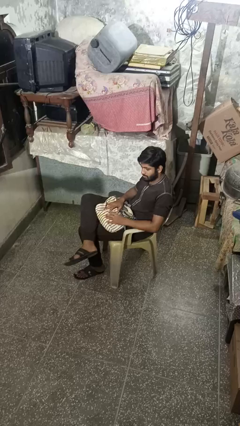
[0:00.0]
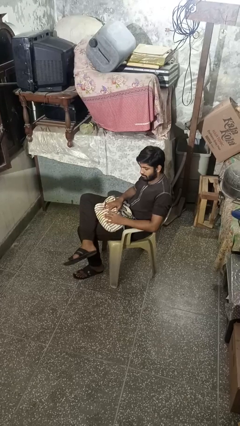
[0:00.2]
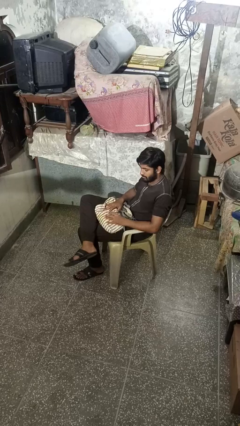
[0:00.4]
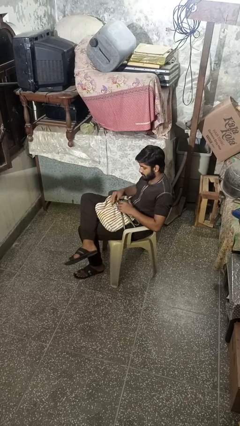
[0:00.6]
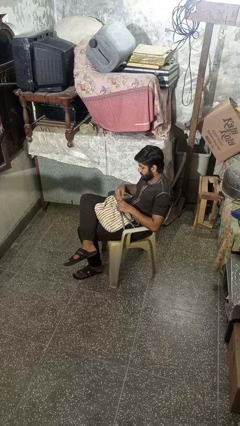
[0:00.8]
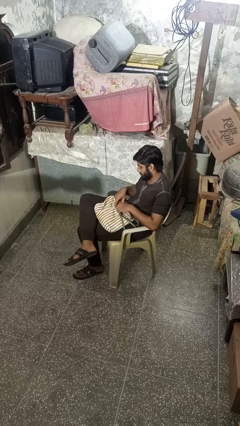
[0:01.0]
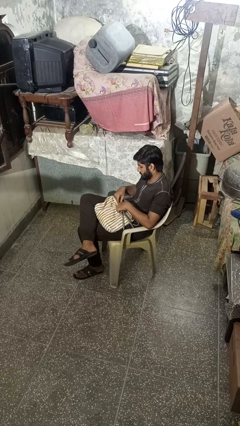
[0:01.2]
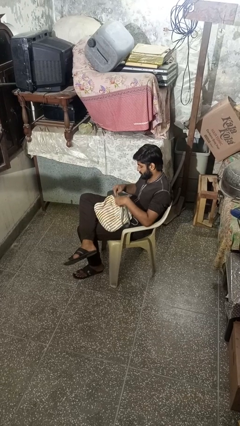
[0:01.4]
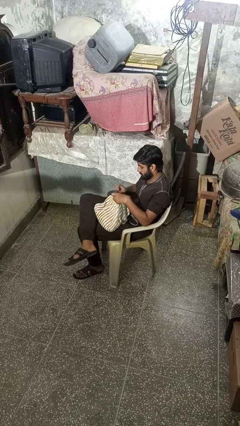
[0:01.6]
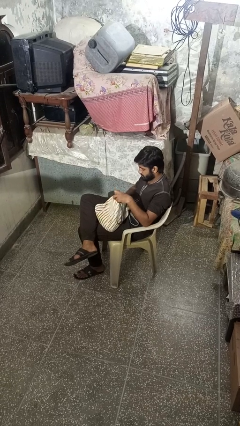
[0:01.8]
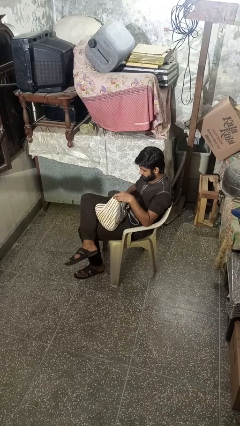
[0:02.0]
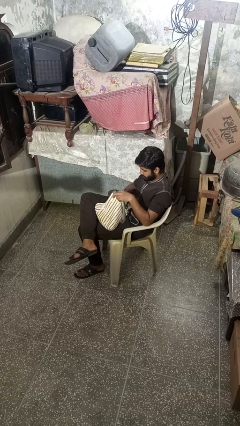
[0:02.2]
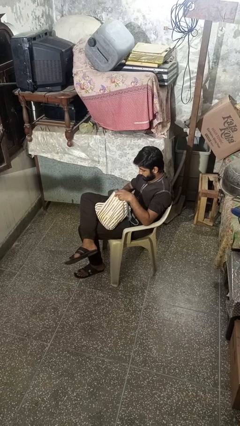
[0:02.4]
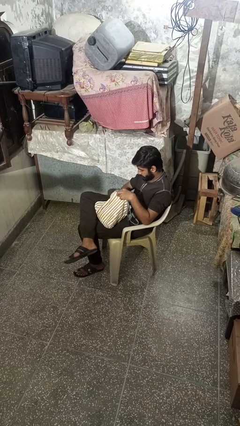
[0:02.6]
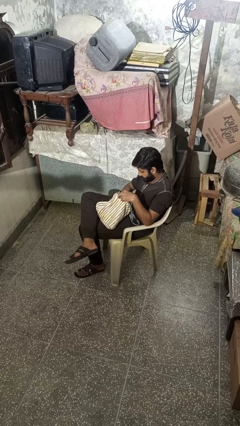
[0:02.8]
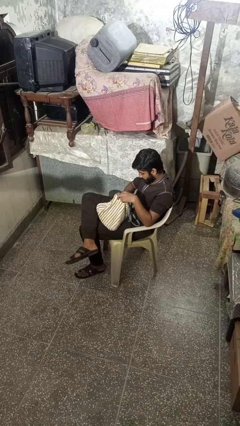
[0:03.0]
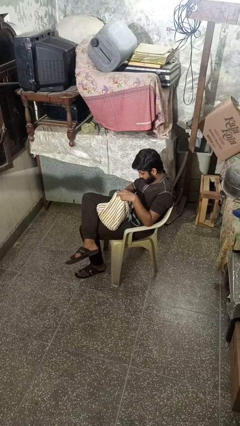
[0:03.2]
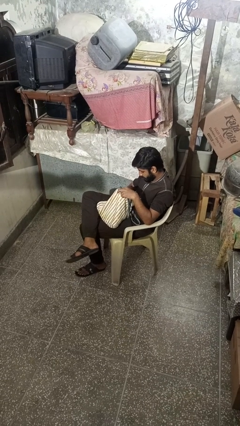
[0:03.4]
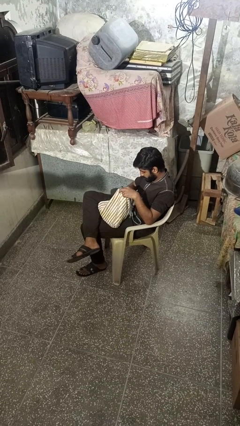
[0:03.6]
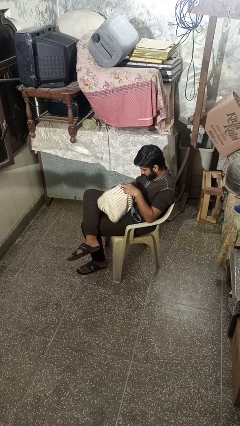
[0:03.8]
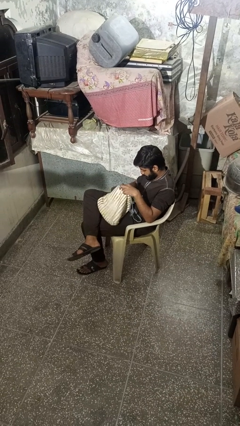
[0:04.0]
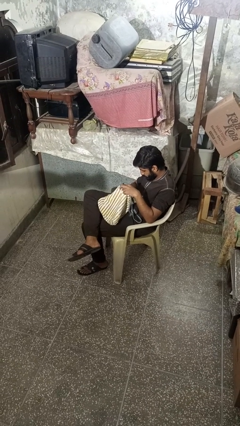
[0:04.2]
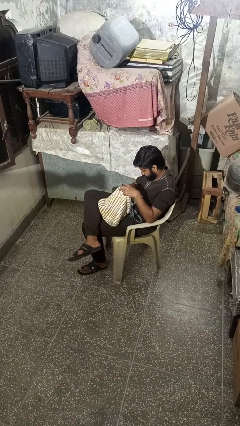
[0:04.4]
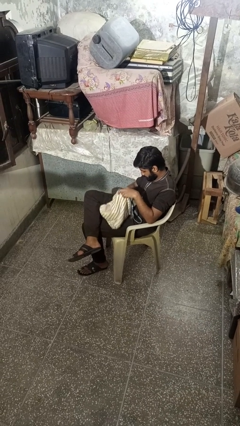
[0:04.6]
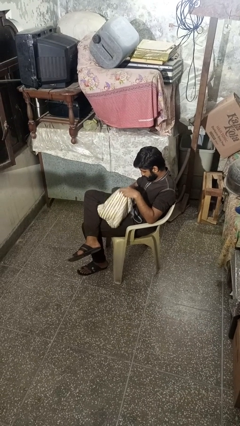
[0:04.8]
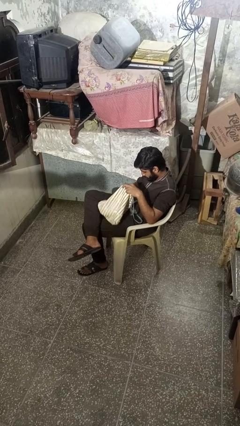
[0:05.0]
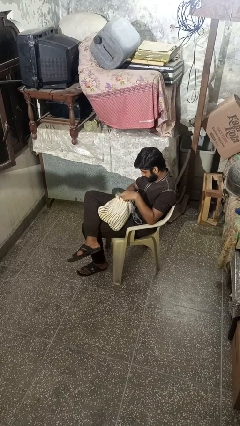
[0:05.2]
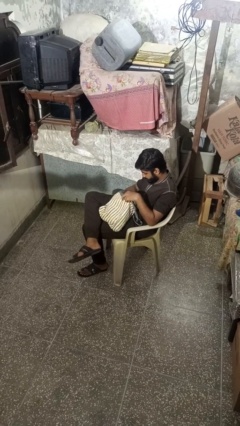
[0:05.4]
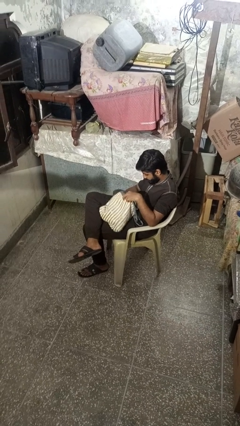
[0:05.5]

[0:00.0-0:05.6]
person searches in purse

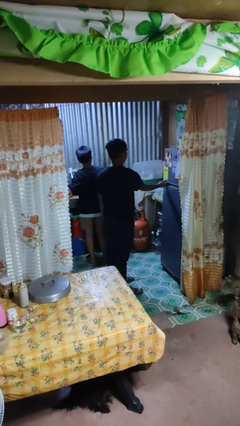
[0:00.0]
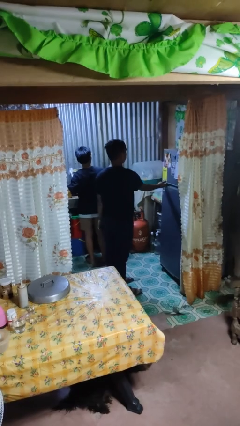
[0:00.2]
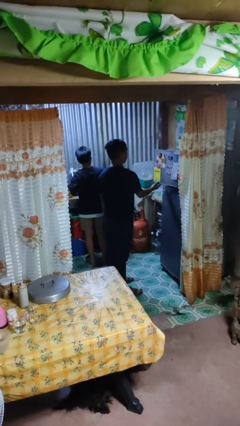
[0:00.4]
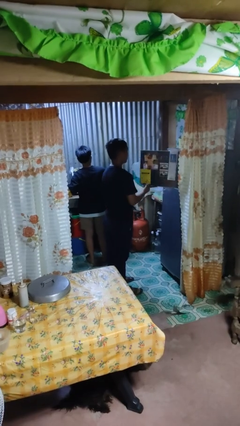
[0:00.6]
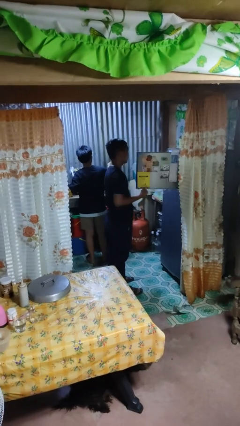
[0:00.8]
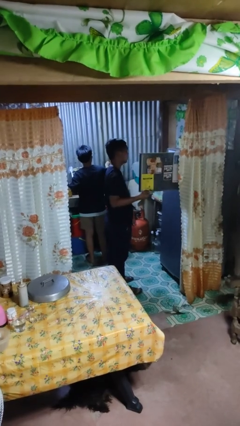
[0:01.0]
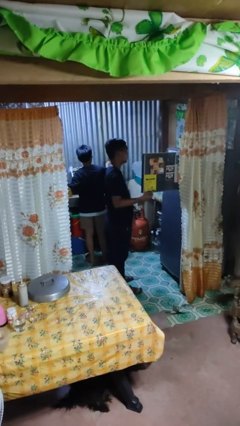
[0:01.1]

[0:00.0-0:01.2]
person opens refrigerator

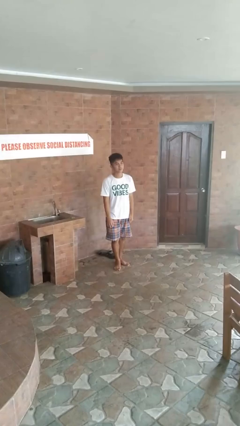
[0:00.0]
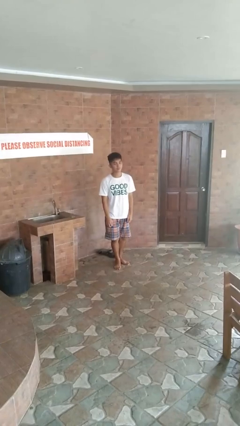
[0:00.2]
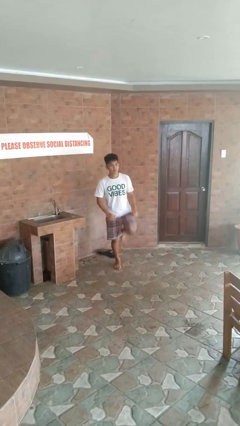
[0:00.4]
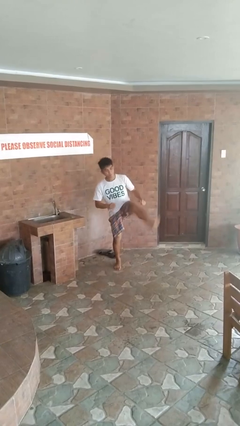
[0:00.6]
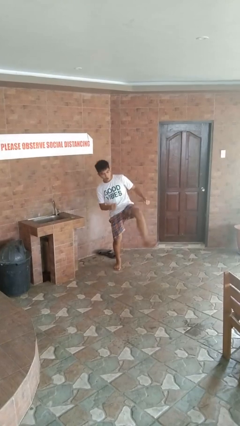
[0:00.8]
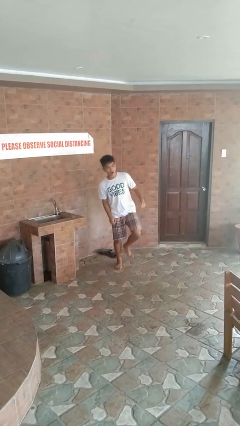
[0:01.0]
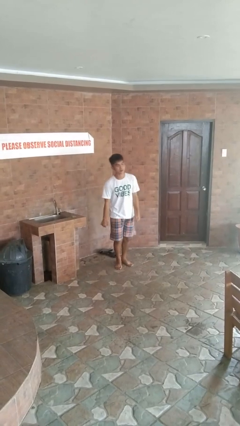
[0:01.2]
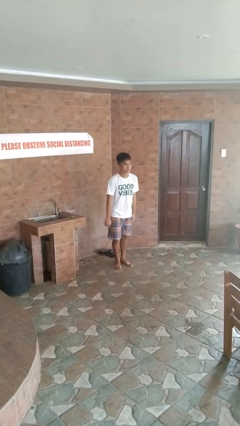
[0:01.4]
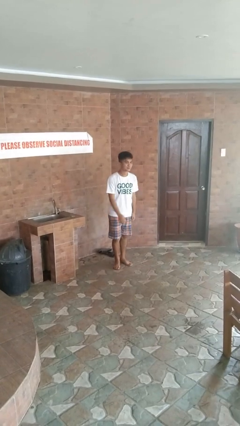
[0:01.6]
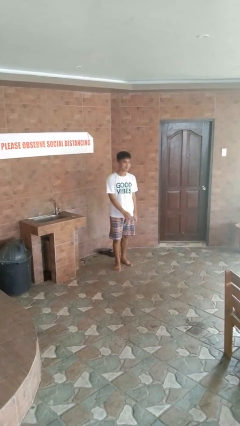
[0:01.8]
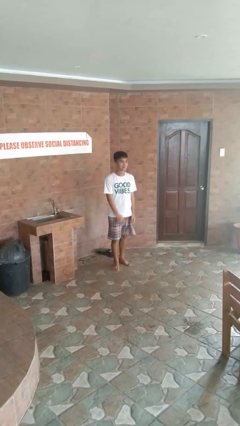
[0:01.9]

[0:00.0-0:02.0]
person karate kicks

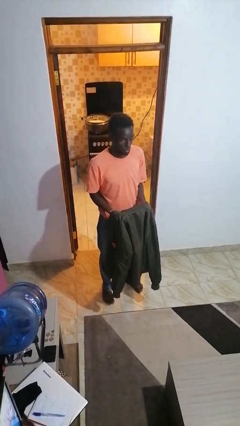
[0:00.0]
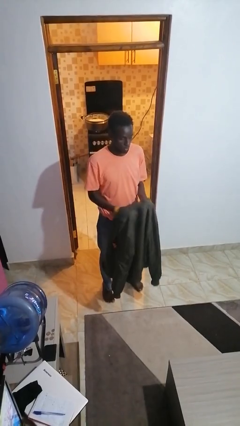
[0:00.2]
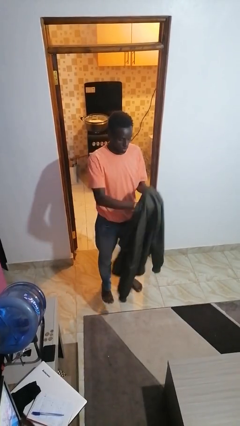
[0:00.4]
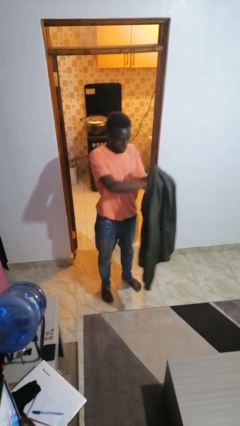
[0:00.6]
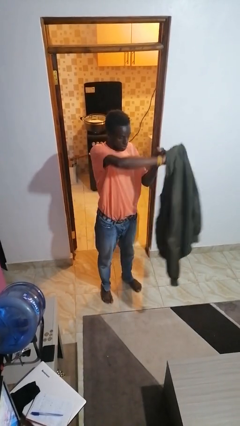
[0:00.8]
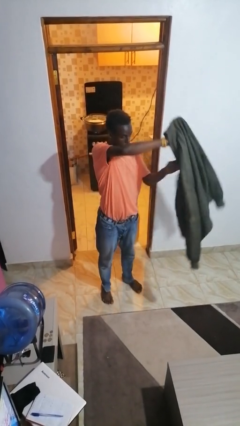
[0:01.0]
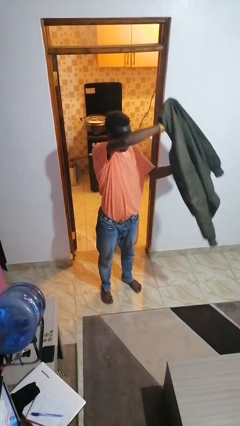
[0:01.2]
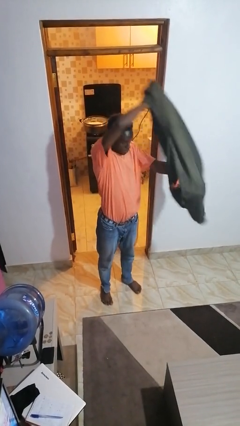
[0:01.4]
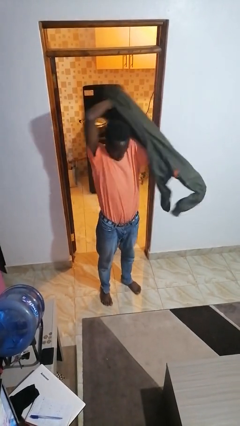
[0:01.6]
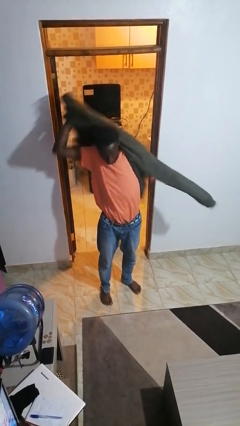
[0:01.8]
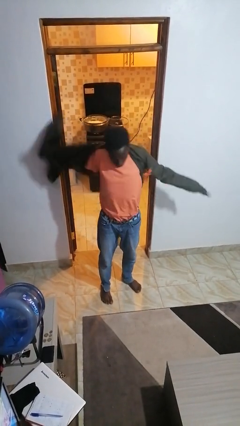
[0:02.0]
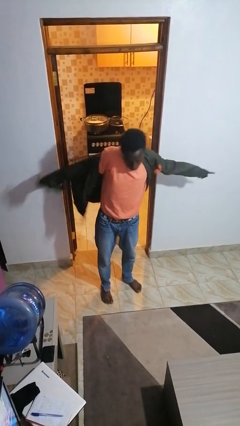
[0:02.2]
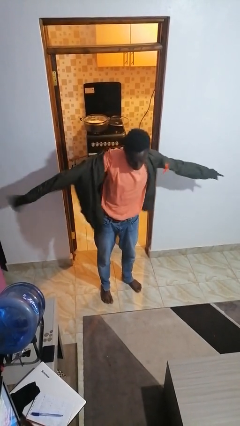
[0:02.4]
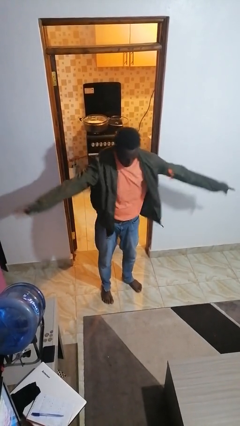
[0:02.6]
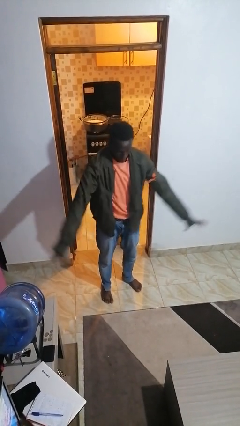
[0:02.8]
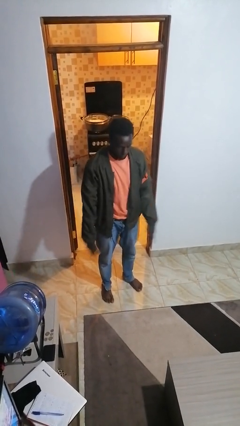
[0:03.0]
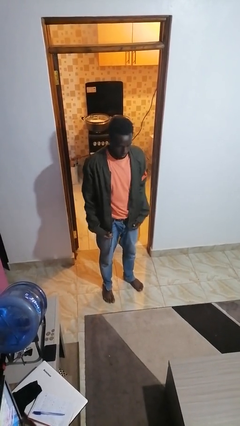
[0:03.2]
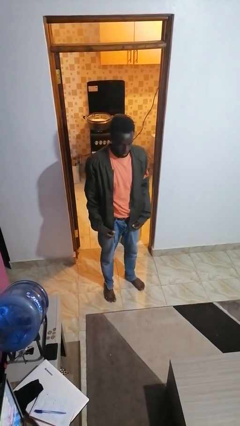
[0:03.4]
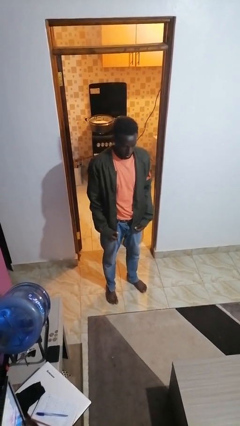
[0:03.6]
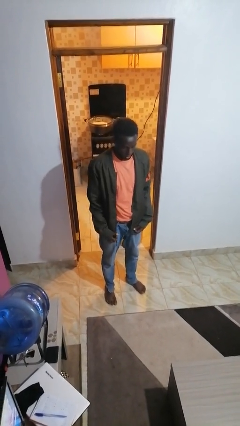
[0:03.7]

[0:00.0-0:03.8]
person puts on jacket

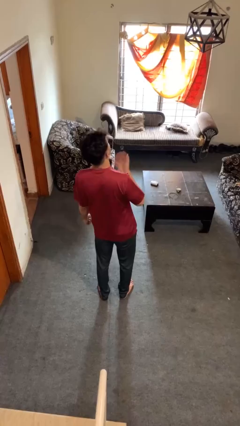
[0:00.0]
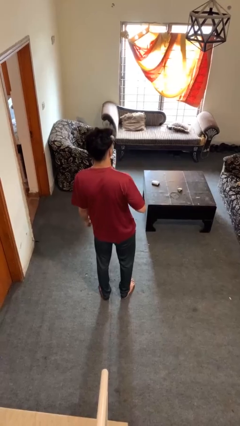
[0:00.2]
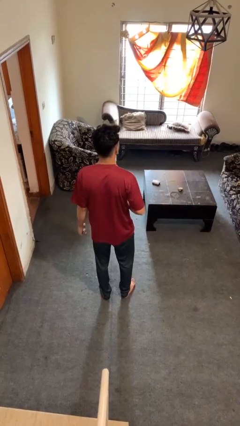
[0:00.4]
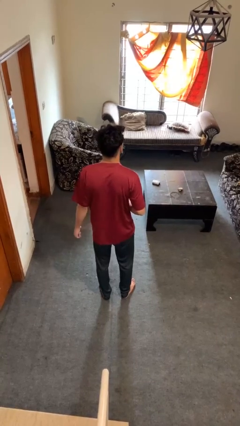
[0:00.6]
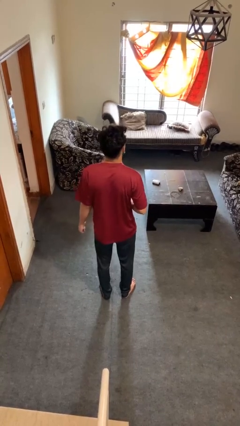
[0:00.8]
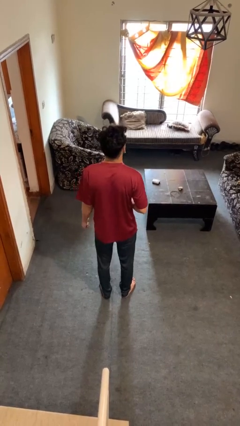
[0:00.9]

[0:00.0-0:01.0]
person catches dropped object

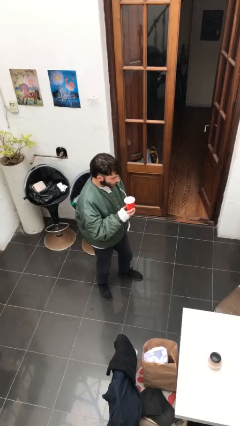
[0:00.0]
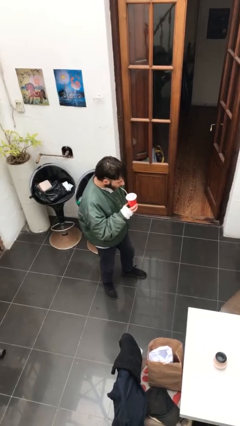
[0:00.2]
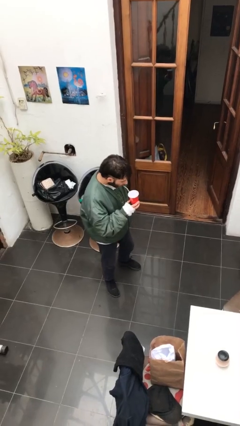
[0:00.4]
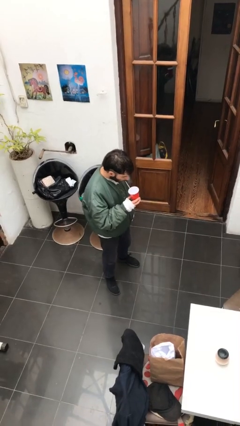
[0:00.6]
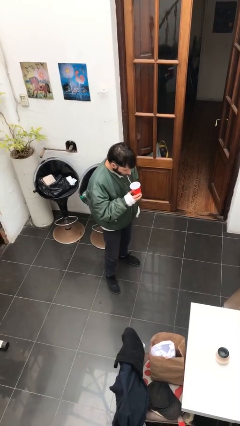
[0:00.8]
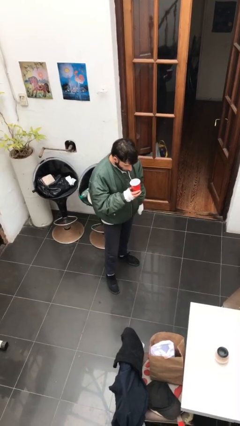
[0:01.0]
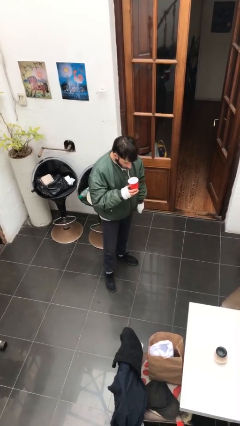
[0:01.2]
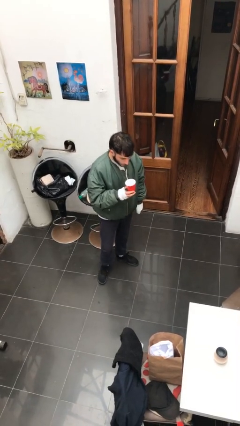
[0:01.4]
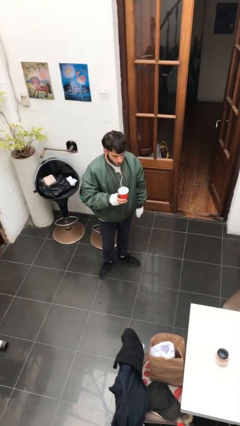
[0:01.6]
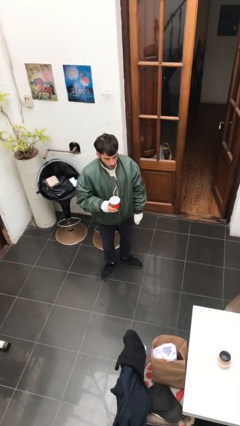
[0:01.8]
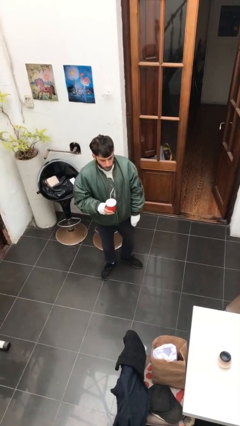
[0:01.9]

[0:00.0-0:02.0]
person drinks from straw

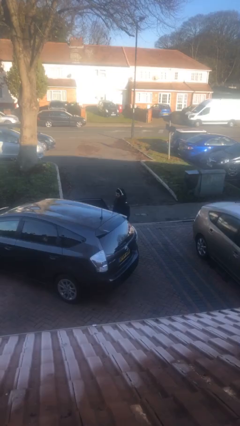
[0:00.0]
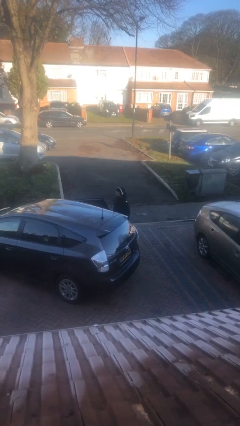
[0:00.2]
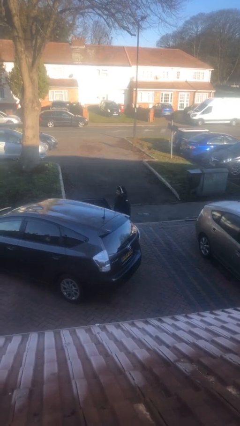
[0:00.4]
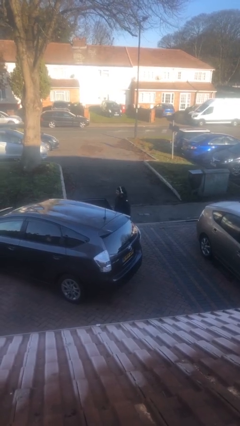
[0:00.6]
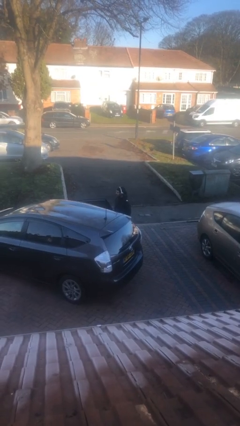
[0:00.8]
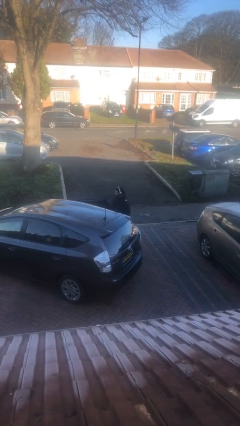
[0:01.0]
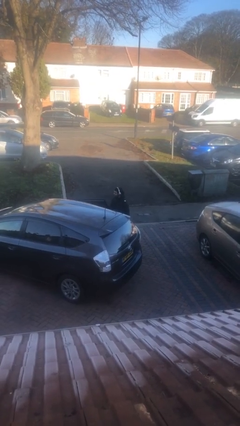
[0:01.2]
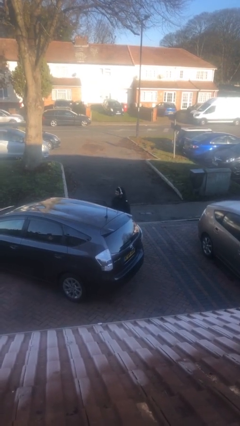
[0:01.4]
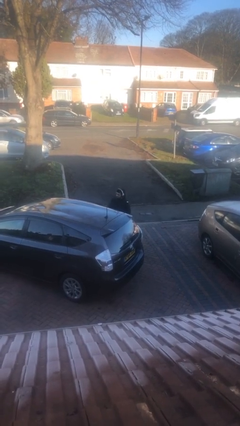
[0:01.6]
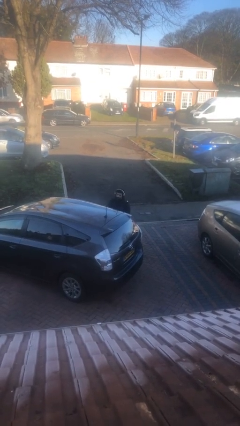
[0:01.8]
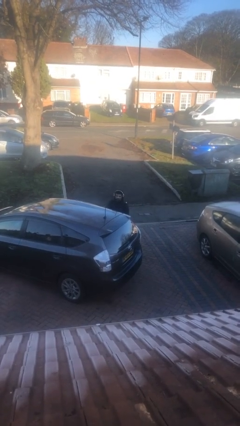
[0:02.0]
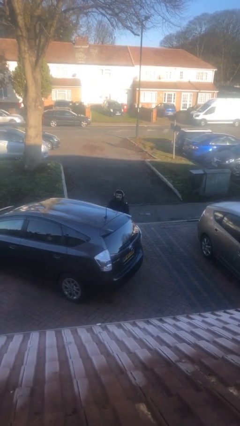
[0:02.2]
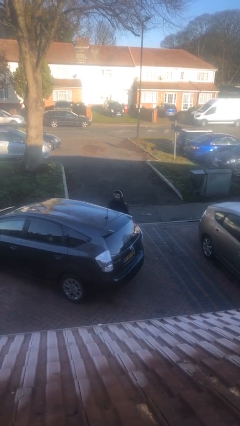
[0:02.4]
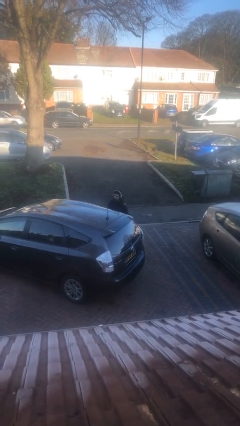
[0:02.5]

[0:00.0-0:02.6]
person closes car door
